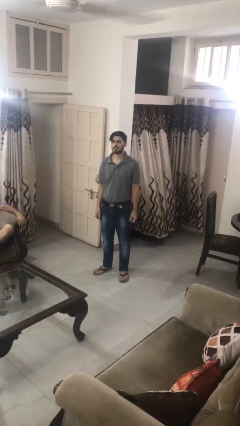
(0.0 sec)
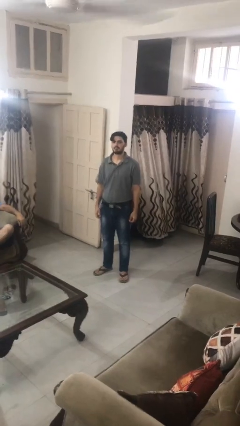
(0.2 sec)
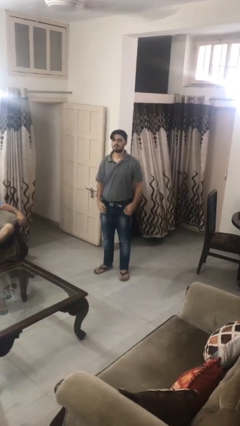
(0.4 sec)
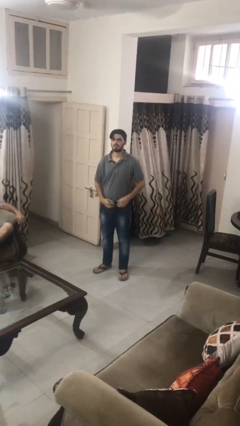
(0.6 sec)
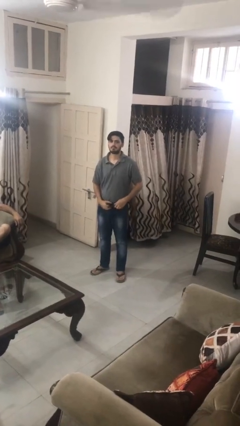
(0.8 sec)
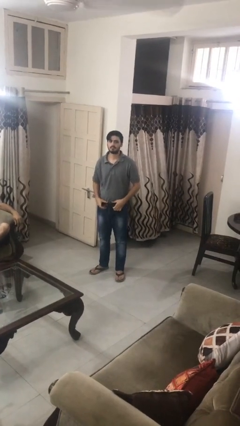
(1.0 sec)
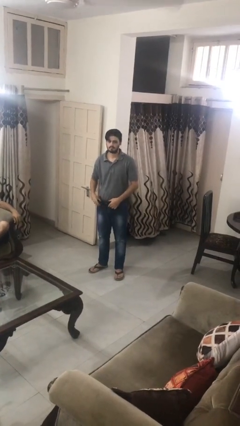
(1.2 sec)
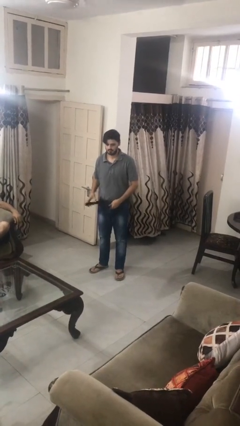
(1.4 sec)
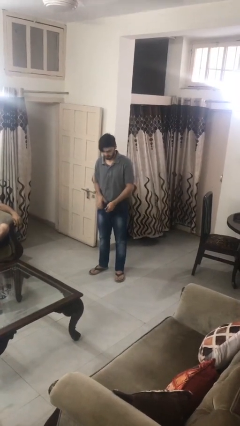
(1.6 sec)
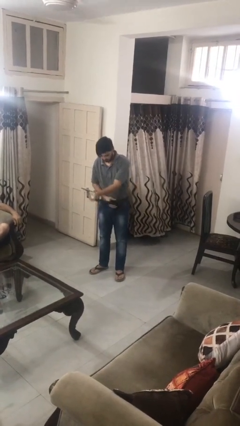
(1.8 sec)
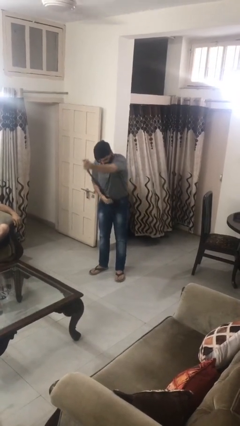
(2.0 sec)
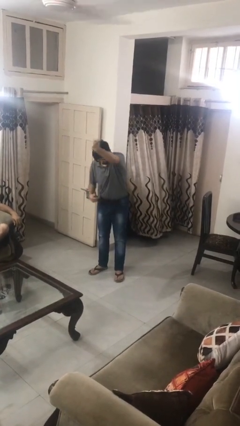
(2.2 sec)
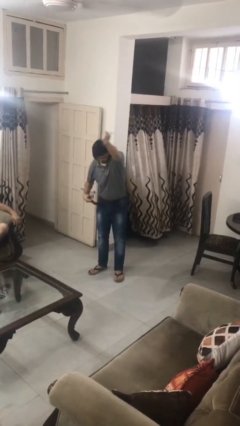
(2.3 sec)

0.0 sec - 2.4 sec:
person takes off belt

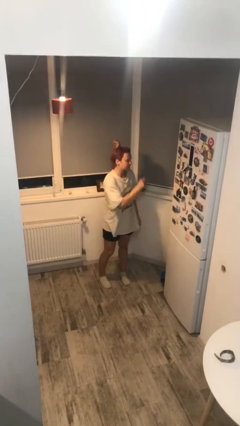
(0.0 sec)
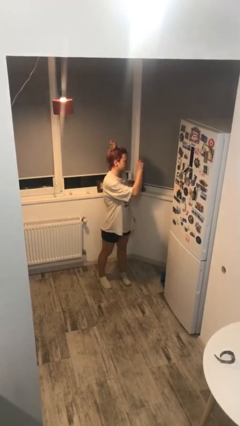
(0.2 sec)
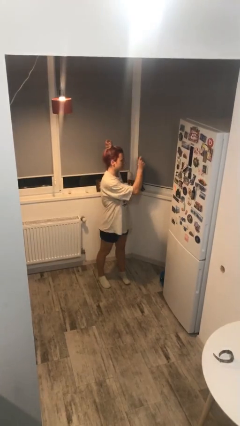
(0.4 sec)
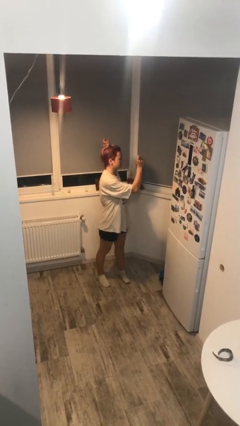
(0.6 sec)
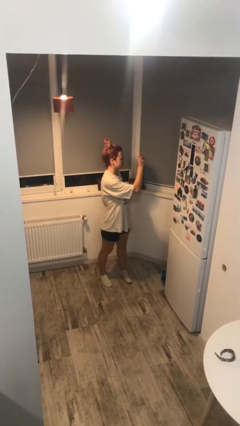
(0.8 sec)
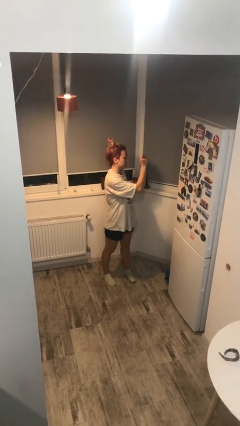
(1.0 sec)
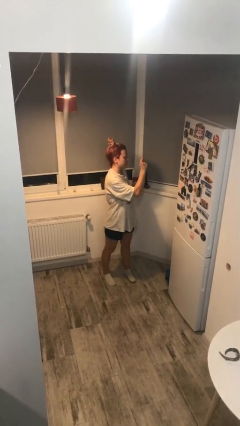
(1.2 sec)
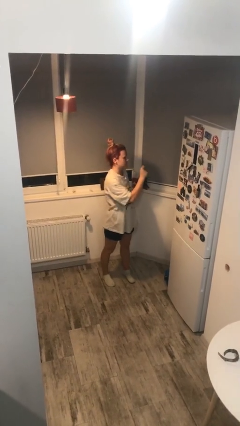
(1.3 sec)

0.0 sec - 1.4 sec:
person snaps fingers

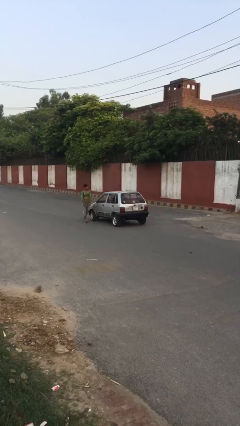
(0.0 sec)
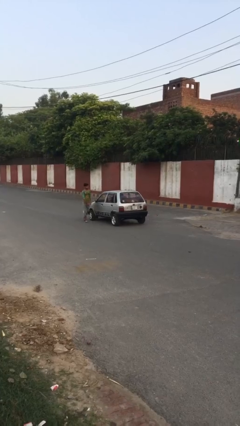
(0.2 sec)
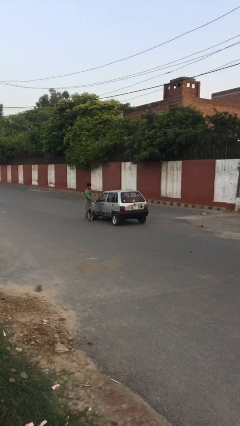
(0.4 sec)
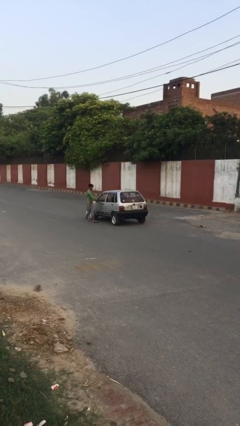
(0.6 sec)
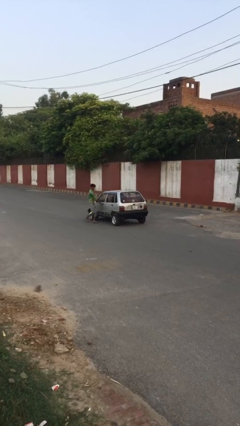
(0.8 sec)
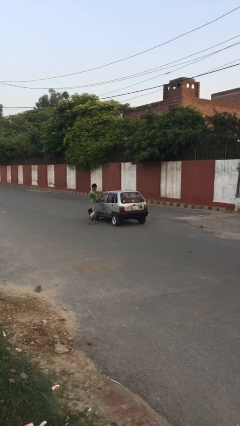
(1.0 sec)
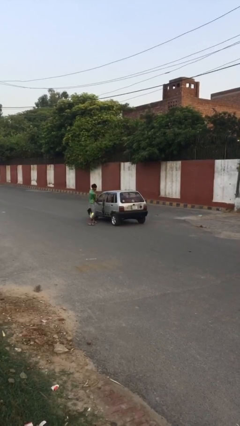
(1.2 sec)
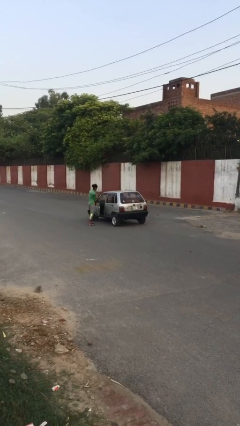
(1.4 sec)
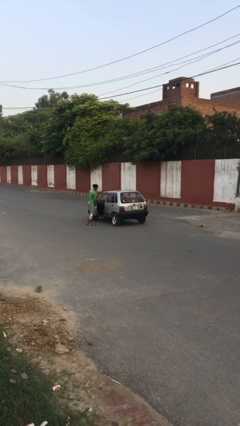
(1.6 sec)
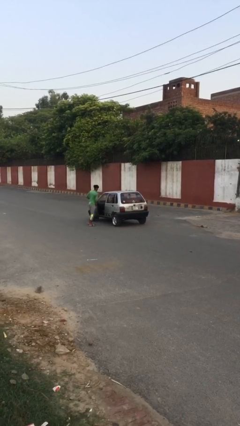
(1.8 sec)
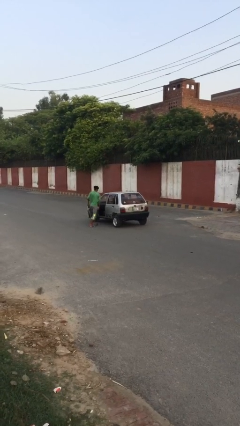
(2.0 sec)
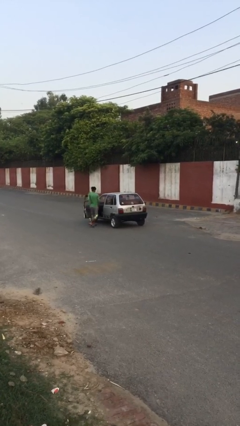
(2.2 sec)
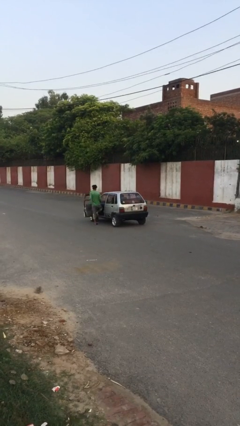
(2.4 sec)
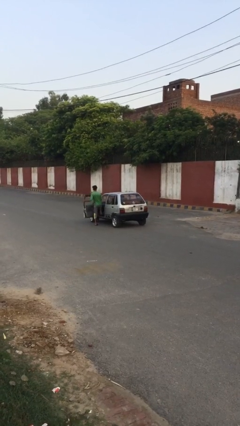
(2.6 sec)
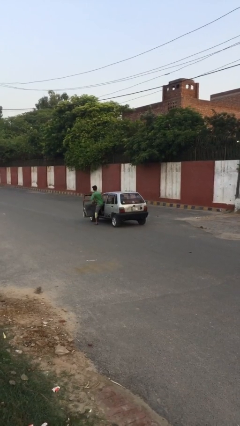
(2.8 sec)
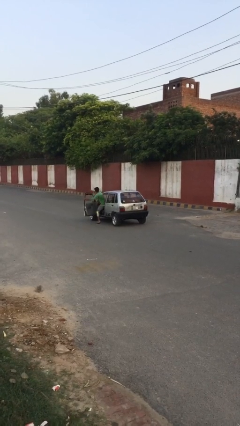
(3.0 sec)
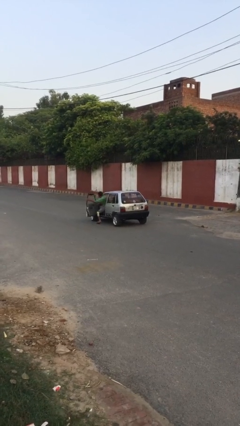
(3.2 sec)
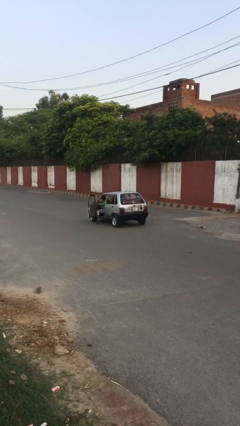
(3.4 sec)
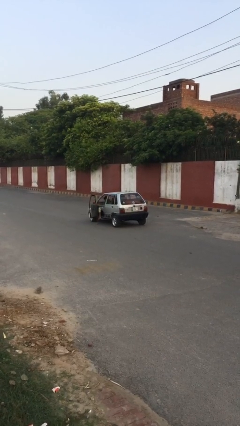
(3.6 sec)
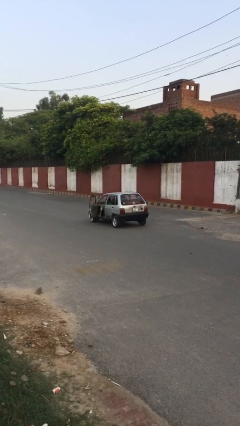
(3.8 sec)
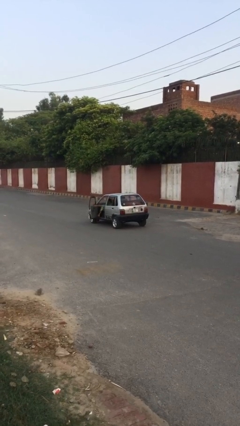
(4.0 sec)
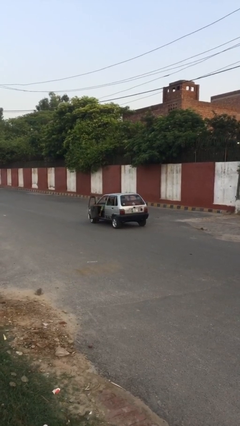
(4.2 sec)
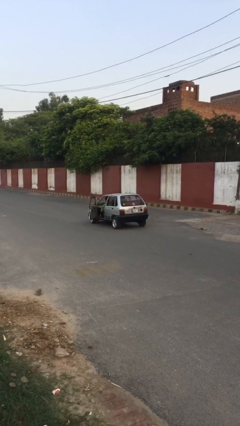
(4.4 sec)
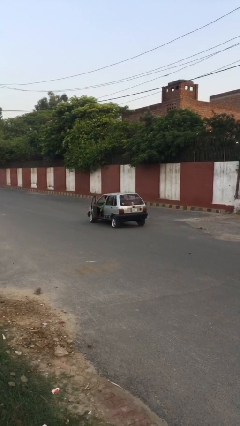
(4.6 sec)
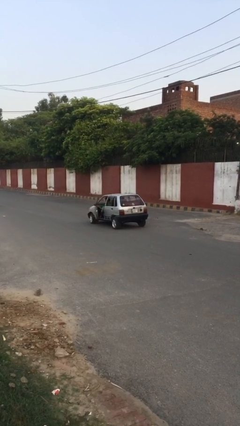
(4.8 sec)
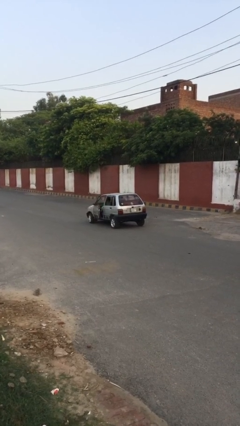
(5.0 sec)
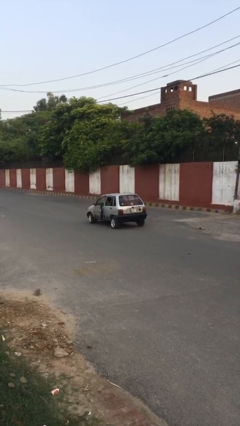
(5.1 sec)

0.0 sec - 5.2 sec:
car picks up person

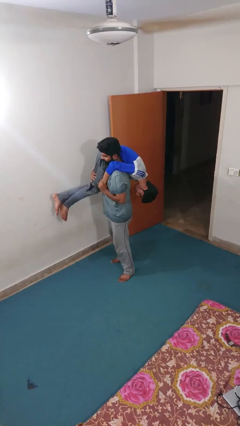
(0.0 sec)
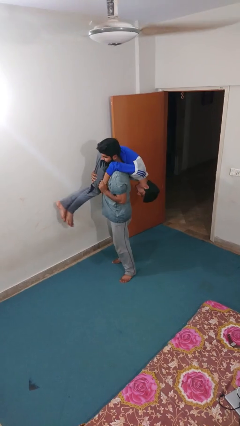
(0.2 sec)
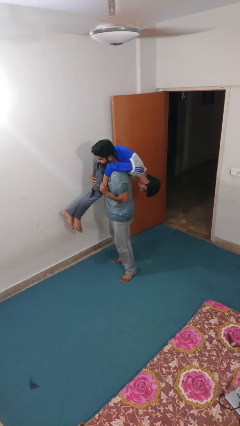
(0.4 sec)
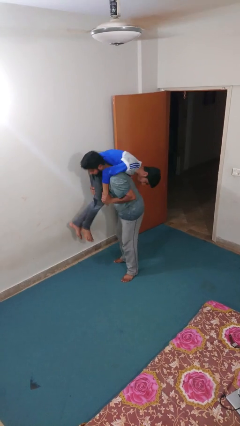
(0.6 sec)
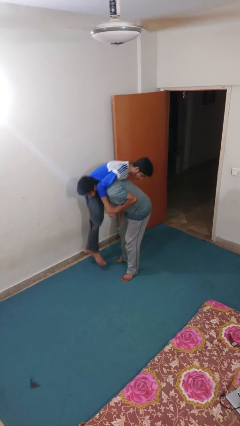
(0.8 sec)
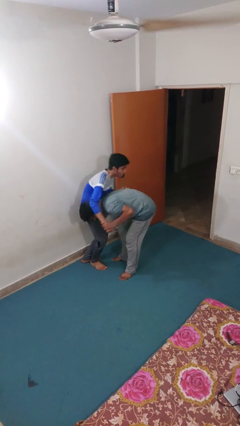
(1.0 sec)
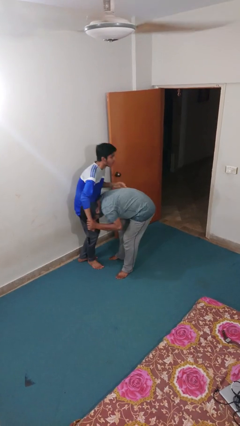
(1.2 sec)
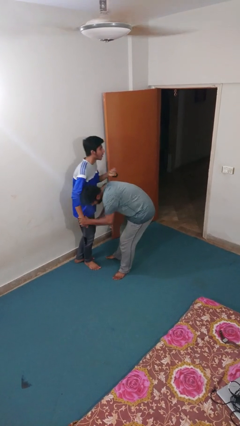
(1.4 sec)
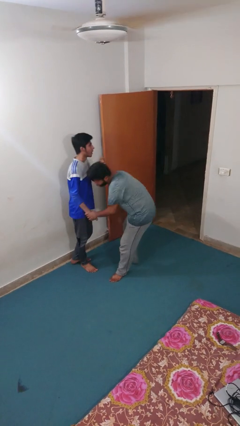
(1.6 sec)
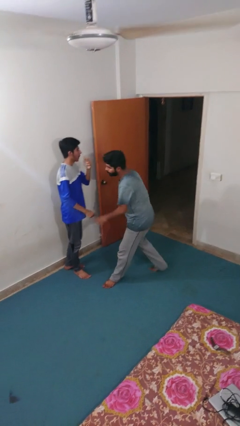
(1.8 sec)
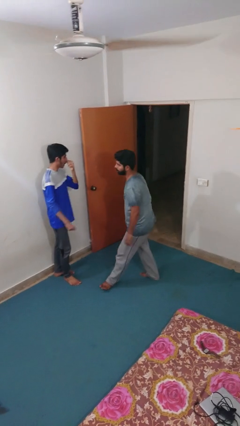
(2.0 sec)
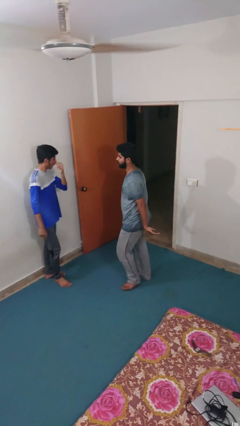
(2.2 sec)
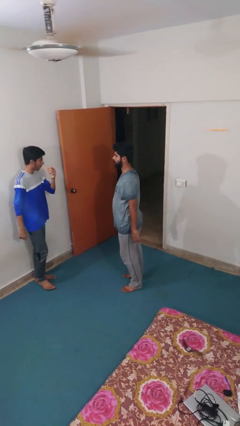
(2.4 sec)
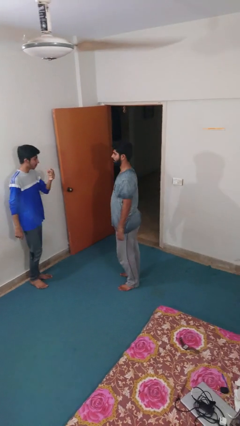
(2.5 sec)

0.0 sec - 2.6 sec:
person puts down person

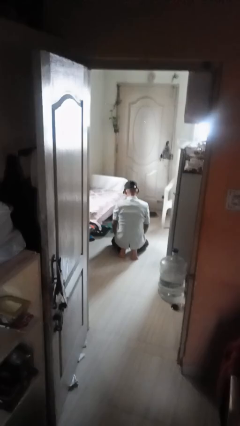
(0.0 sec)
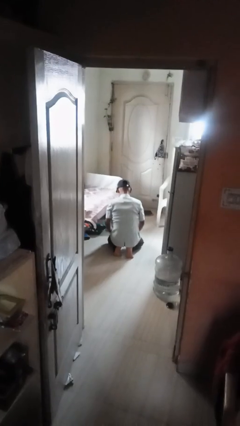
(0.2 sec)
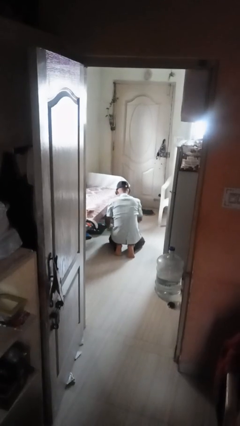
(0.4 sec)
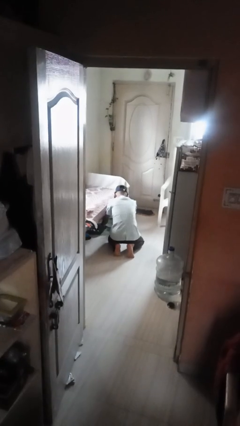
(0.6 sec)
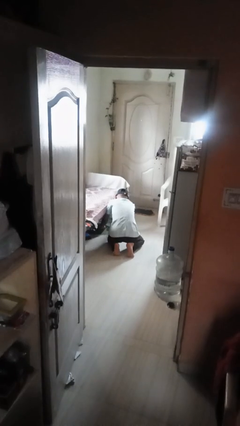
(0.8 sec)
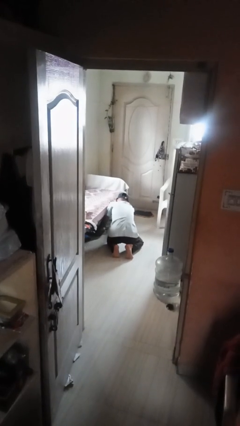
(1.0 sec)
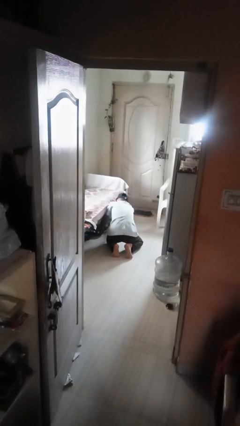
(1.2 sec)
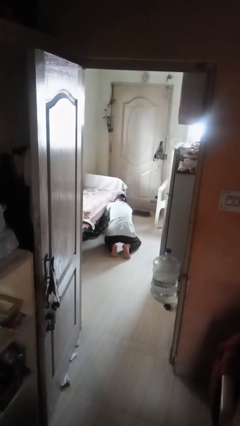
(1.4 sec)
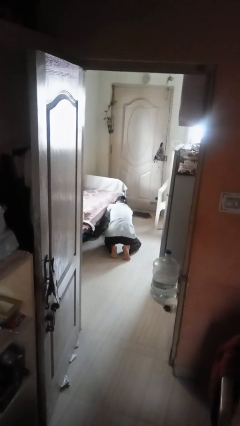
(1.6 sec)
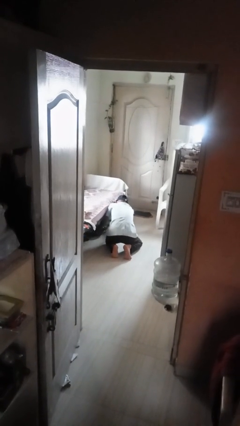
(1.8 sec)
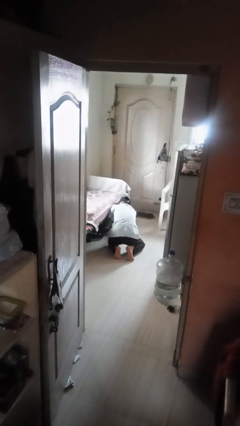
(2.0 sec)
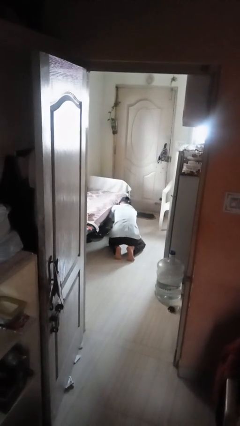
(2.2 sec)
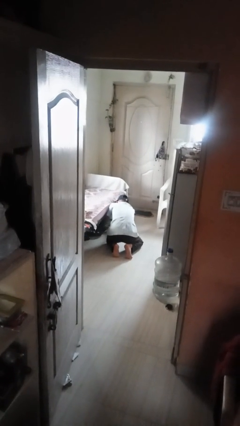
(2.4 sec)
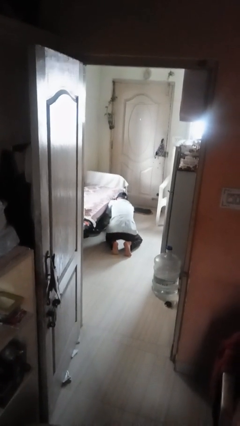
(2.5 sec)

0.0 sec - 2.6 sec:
person searches under bed

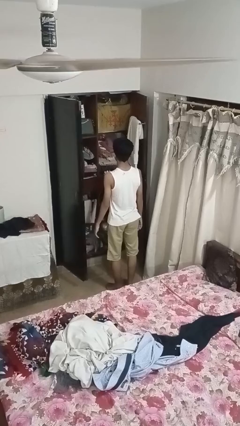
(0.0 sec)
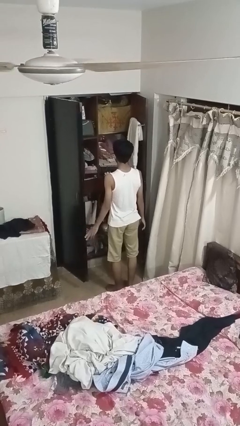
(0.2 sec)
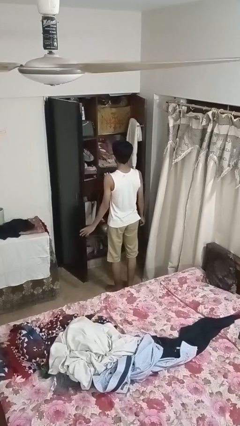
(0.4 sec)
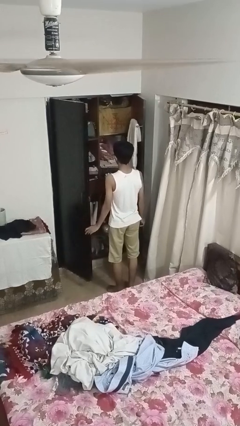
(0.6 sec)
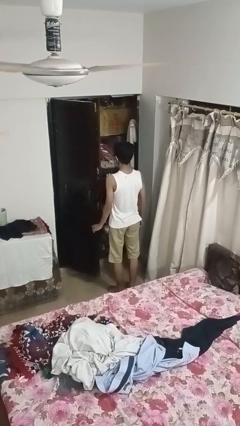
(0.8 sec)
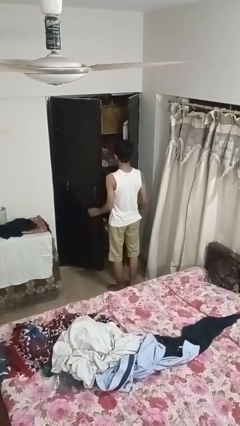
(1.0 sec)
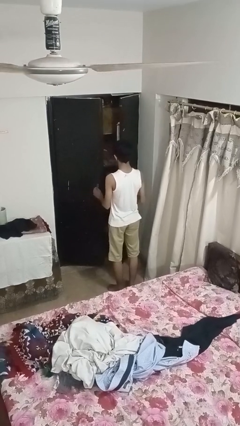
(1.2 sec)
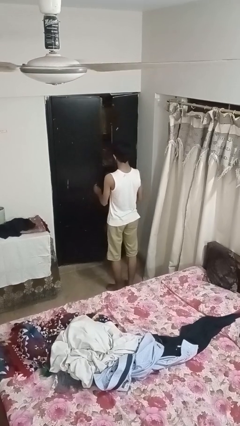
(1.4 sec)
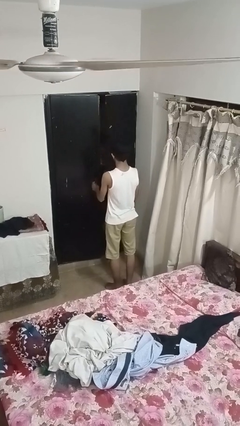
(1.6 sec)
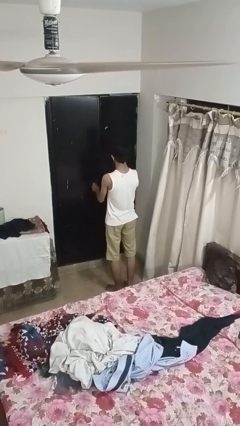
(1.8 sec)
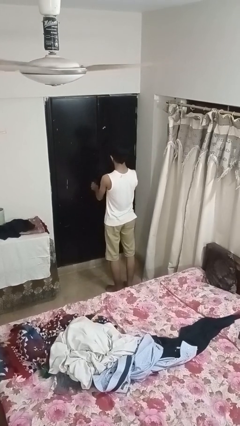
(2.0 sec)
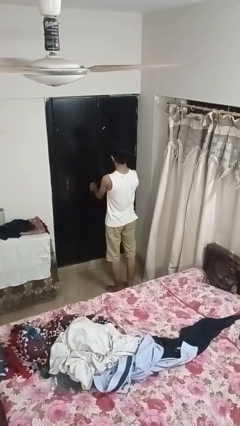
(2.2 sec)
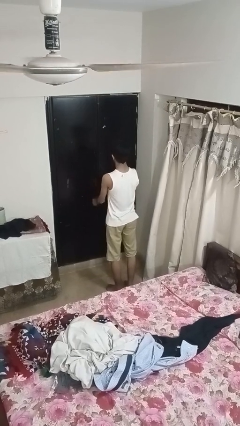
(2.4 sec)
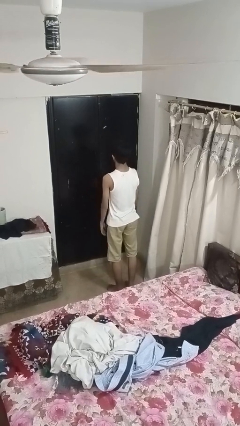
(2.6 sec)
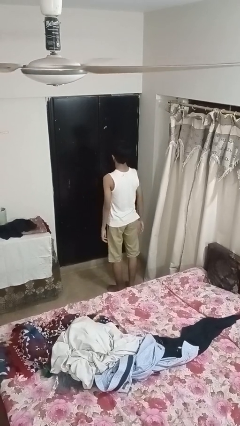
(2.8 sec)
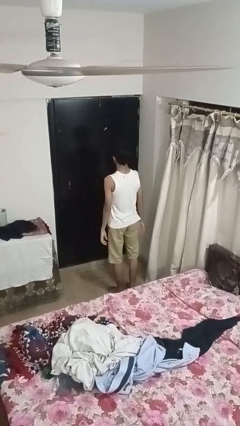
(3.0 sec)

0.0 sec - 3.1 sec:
person closes closet door
